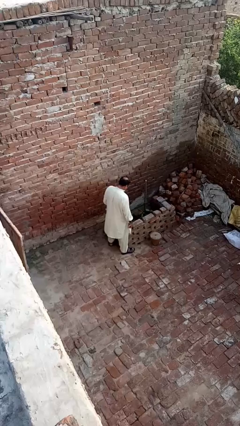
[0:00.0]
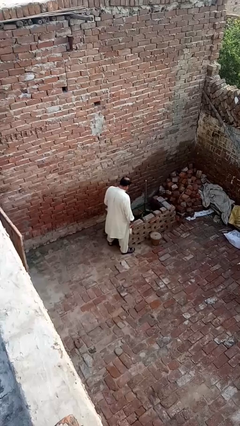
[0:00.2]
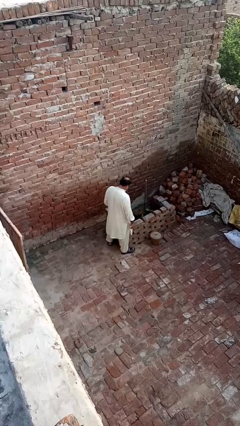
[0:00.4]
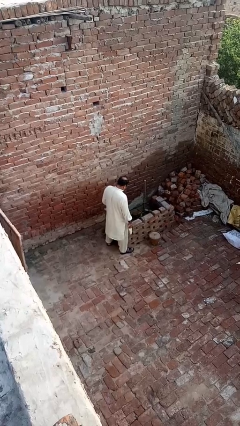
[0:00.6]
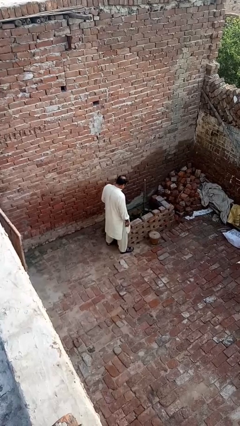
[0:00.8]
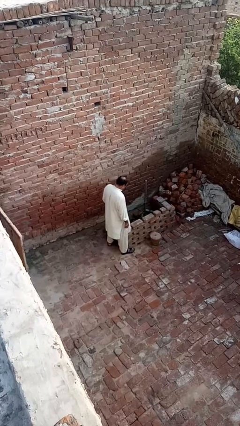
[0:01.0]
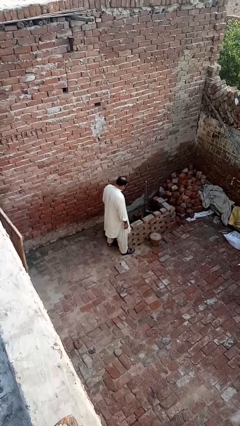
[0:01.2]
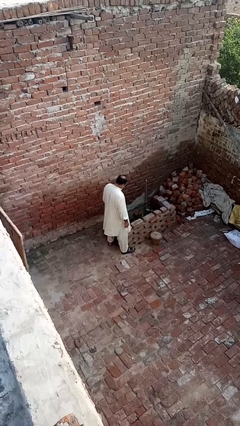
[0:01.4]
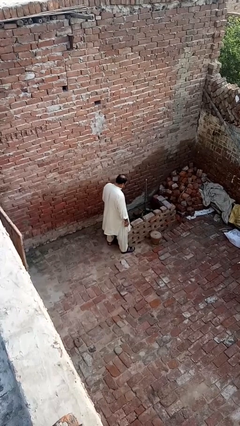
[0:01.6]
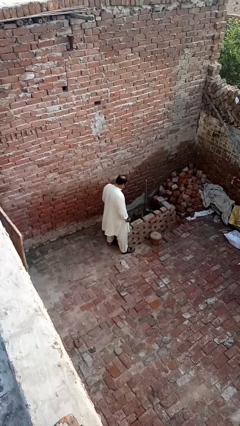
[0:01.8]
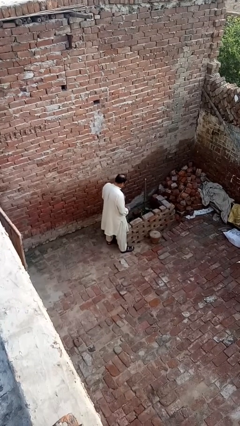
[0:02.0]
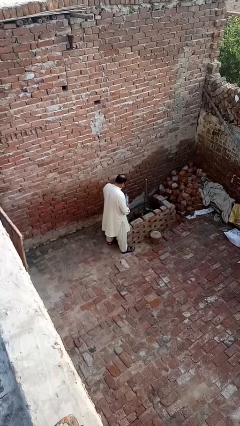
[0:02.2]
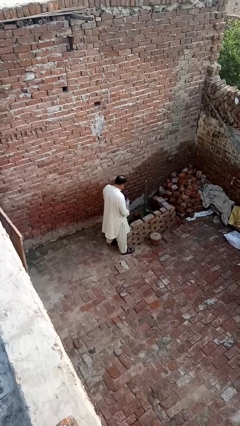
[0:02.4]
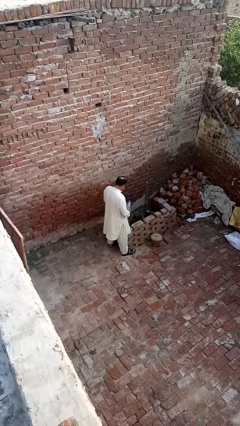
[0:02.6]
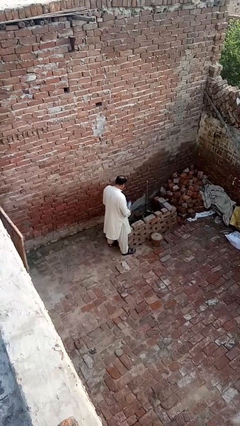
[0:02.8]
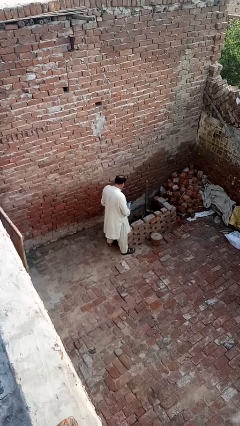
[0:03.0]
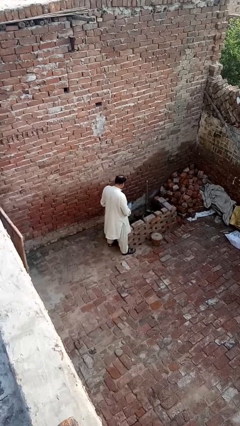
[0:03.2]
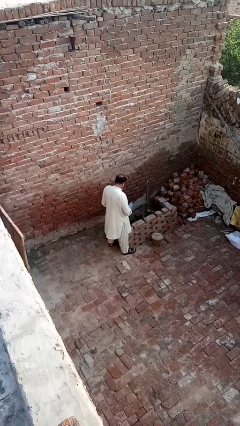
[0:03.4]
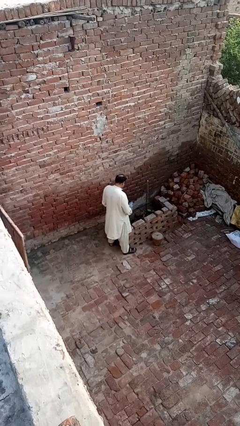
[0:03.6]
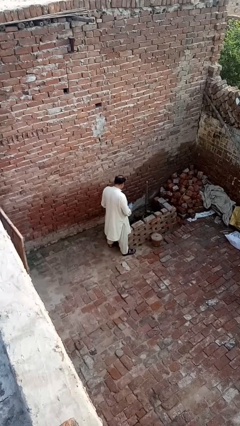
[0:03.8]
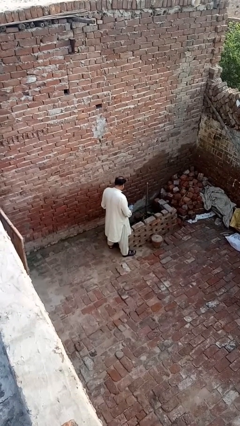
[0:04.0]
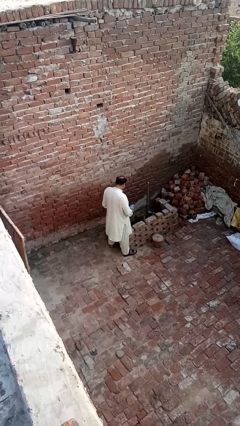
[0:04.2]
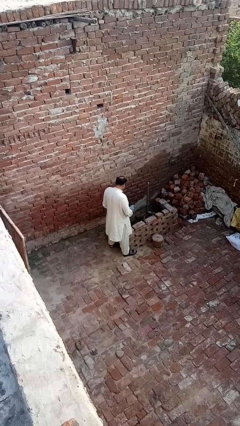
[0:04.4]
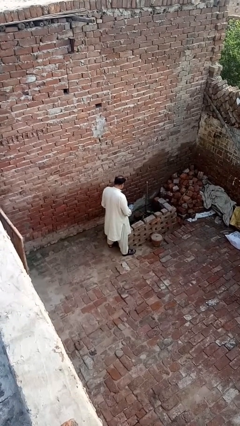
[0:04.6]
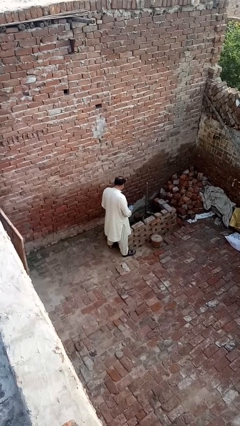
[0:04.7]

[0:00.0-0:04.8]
person waters houseplant

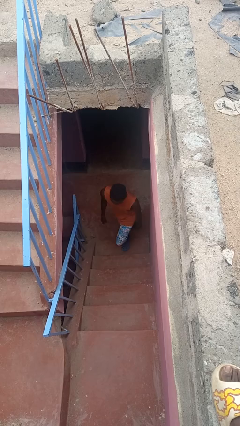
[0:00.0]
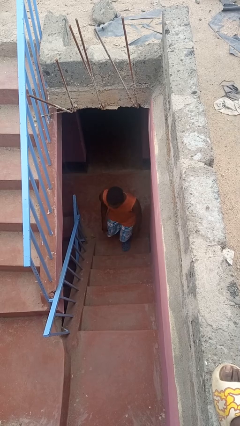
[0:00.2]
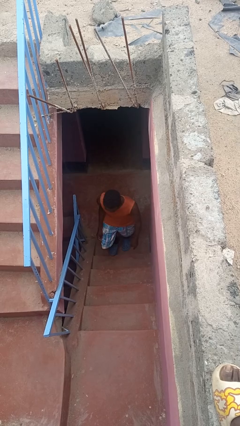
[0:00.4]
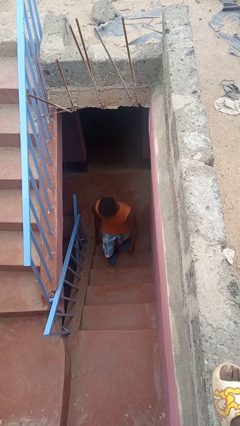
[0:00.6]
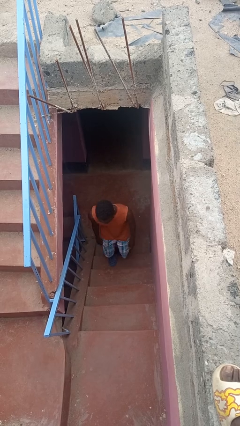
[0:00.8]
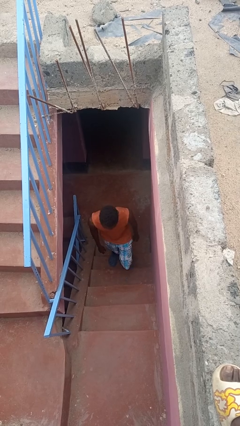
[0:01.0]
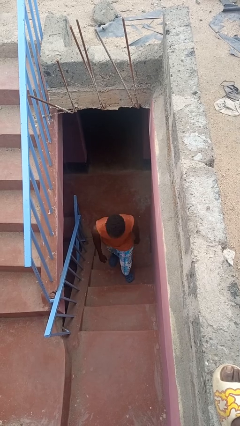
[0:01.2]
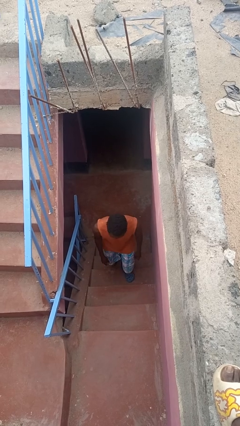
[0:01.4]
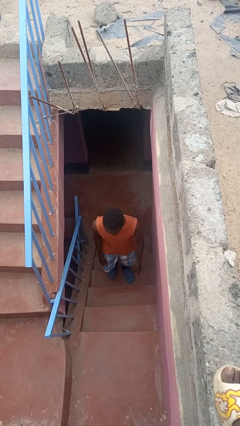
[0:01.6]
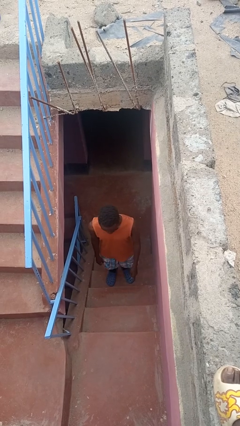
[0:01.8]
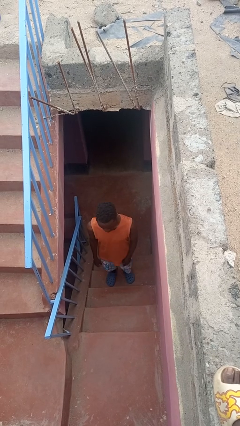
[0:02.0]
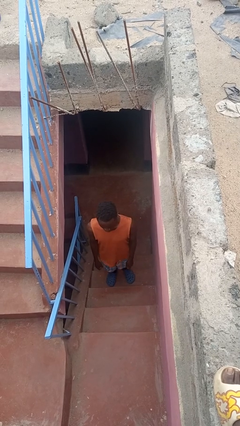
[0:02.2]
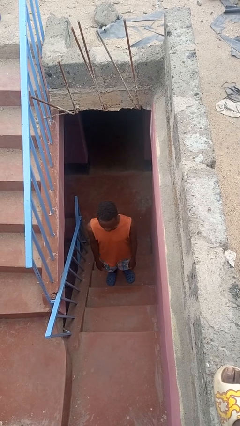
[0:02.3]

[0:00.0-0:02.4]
person climbs up stairs

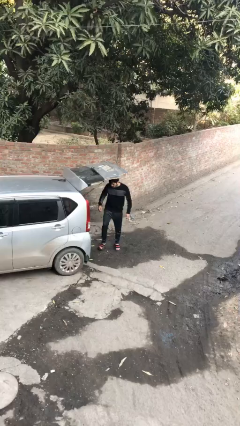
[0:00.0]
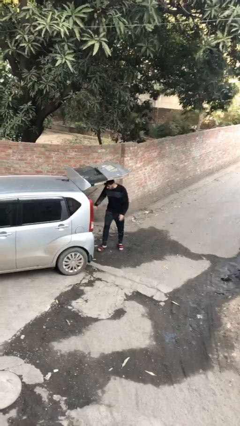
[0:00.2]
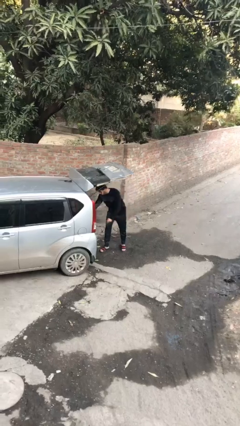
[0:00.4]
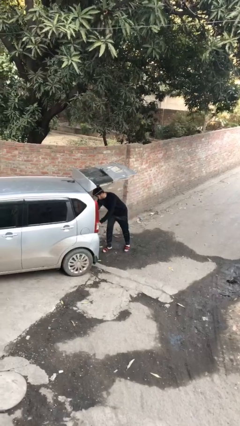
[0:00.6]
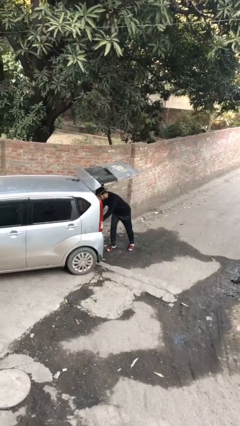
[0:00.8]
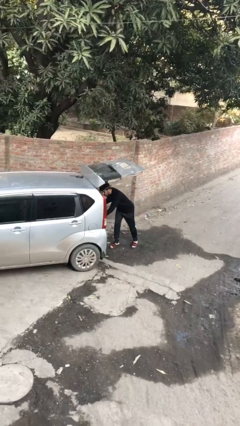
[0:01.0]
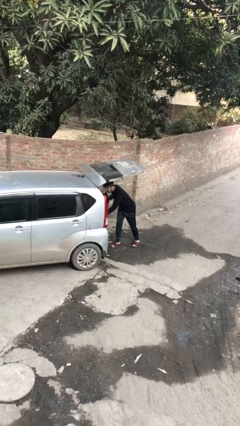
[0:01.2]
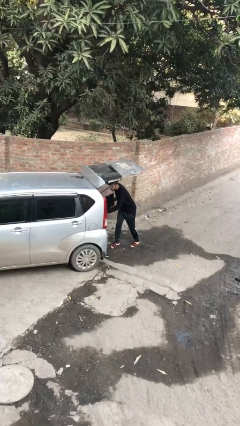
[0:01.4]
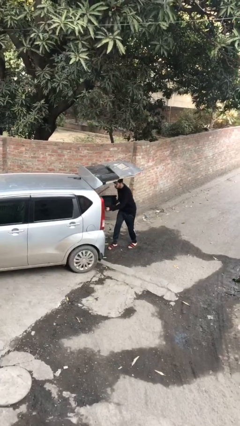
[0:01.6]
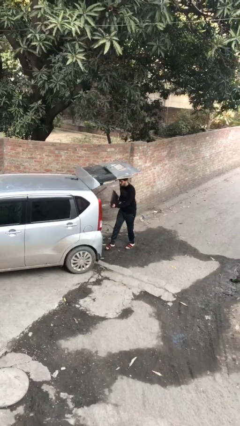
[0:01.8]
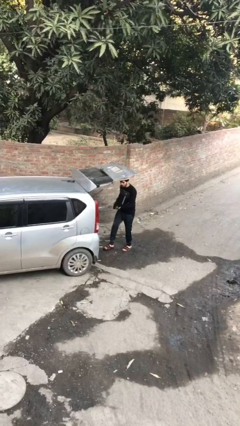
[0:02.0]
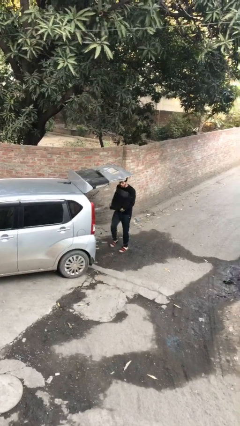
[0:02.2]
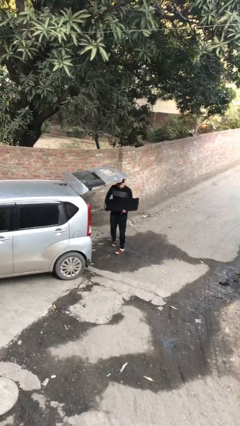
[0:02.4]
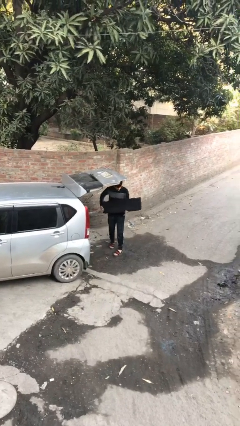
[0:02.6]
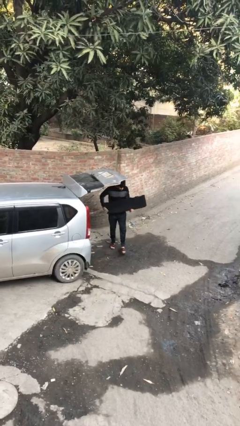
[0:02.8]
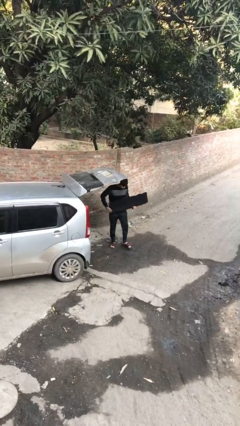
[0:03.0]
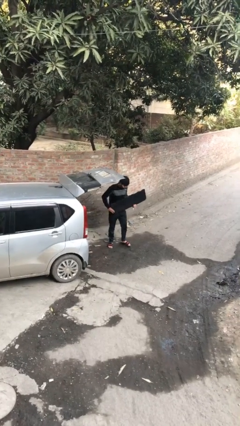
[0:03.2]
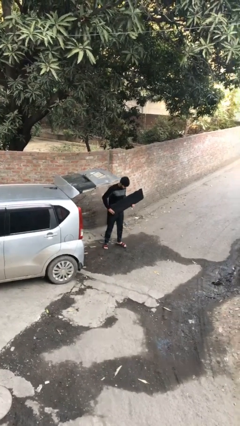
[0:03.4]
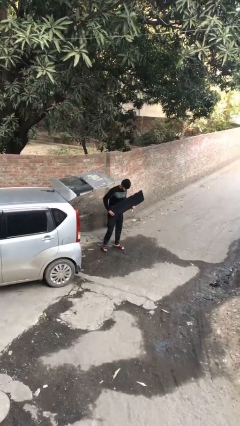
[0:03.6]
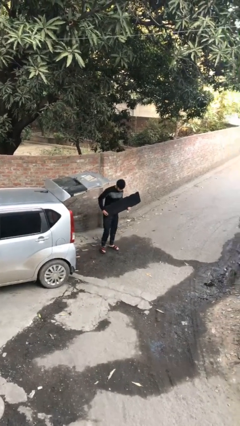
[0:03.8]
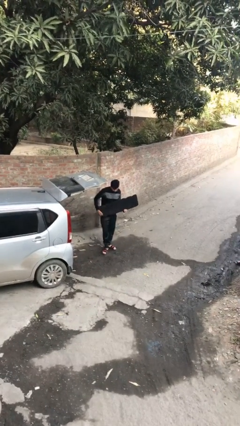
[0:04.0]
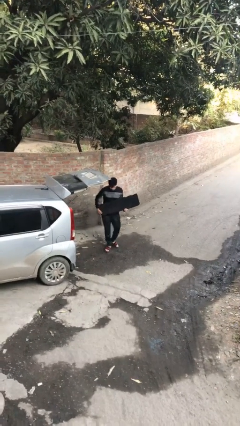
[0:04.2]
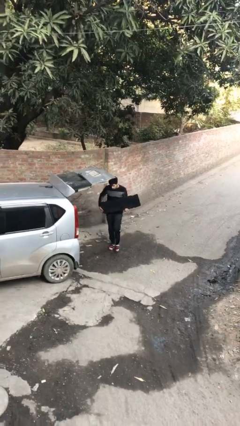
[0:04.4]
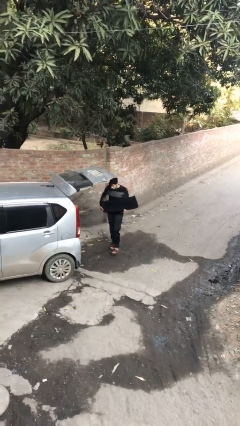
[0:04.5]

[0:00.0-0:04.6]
person unloads car

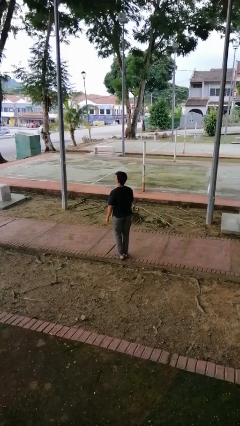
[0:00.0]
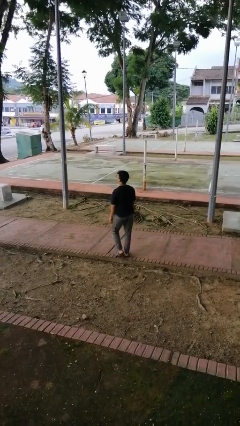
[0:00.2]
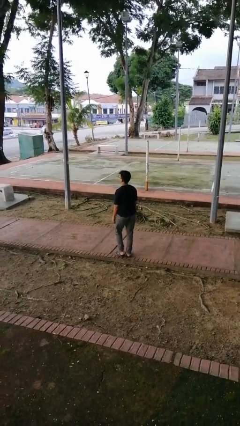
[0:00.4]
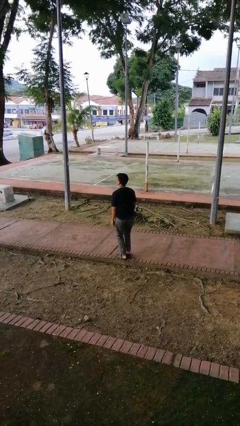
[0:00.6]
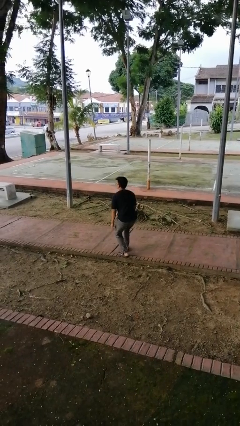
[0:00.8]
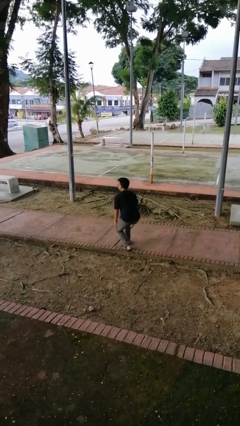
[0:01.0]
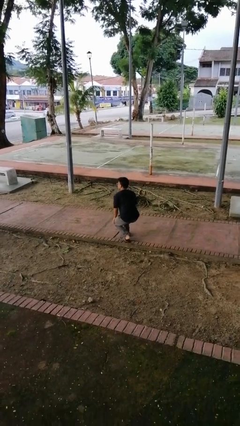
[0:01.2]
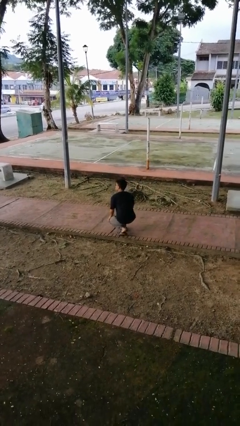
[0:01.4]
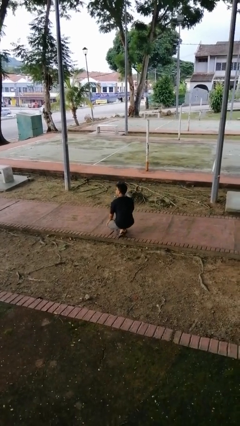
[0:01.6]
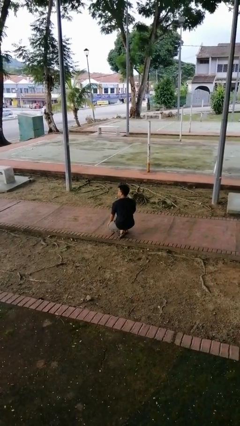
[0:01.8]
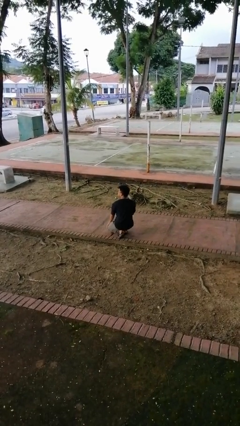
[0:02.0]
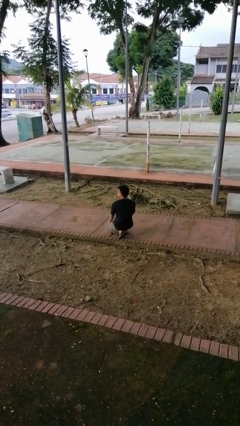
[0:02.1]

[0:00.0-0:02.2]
person kneels

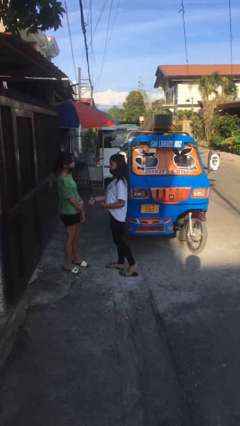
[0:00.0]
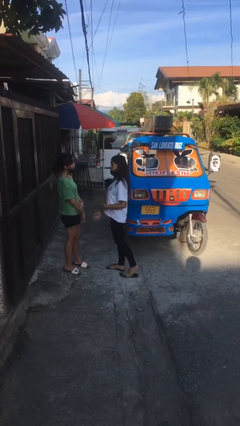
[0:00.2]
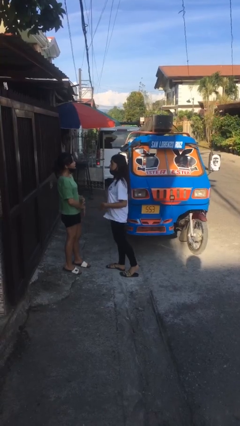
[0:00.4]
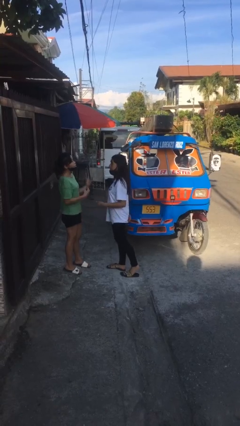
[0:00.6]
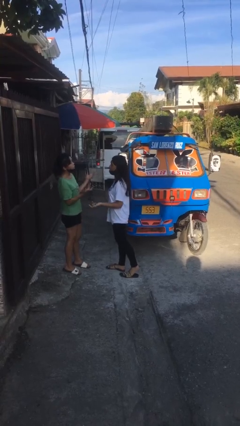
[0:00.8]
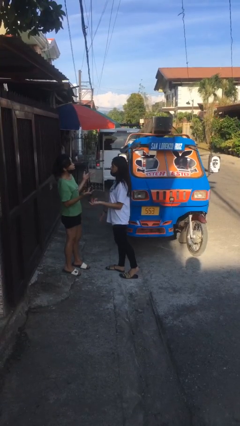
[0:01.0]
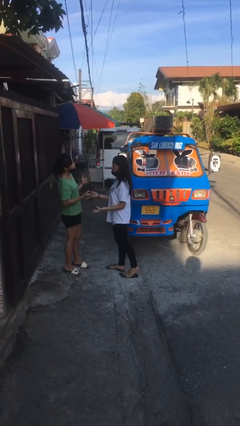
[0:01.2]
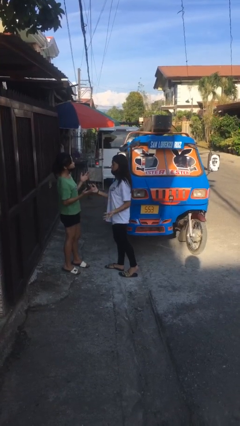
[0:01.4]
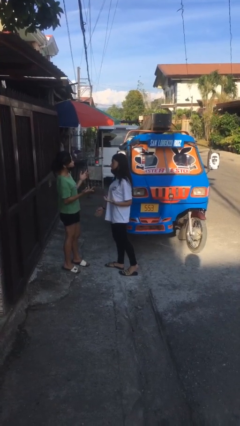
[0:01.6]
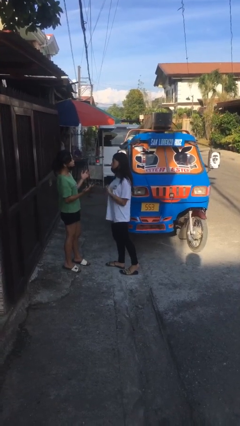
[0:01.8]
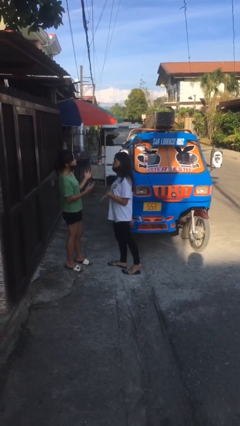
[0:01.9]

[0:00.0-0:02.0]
person talks to person

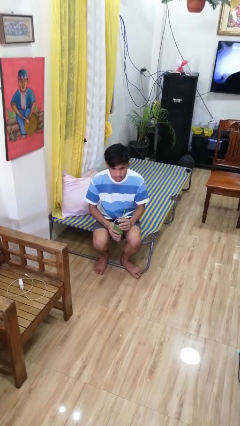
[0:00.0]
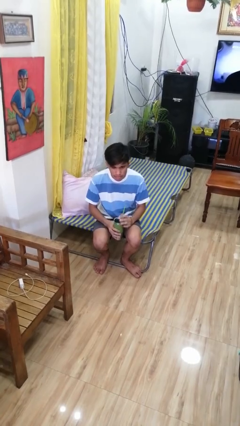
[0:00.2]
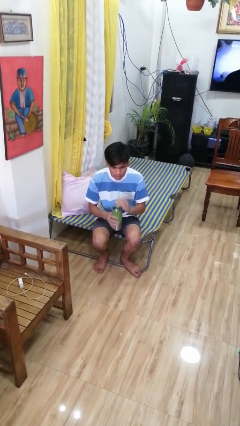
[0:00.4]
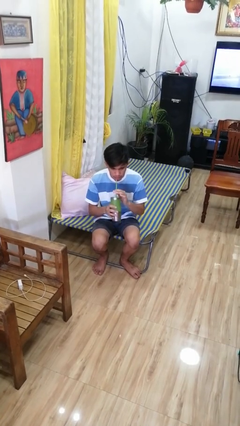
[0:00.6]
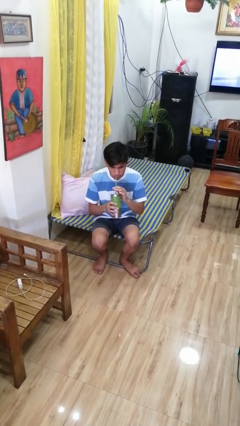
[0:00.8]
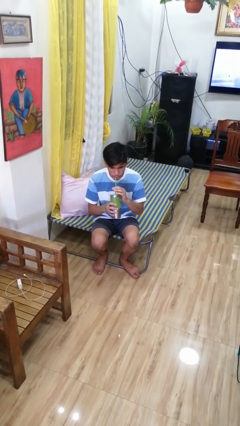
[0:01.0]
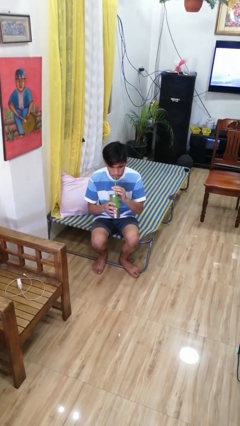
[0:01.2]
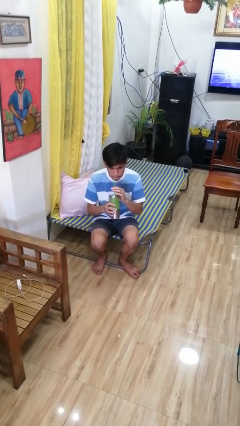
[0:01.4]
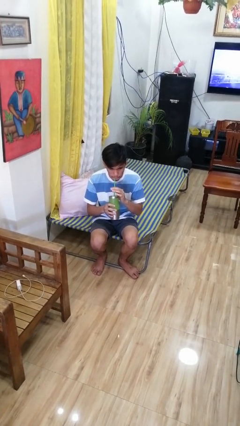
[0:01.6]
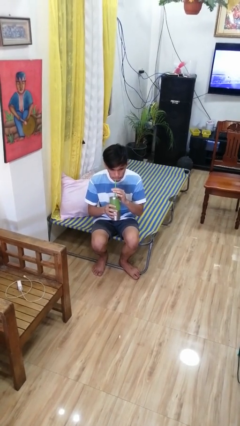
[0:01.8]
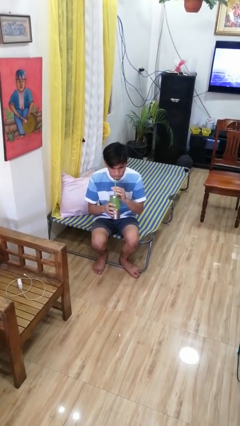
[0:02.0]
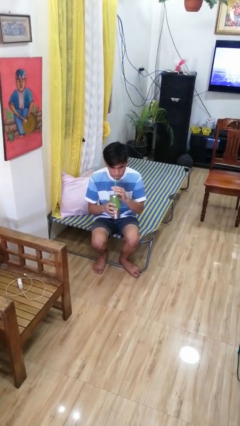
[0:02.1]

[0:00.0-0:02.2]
person drinks from straw
